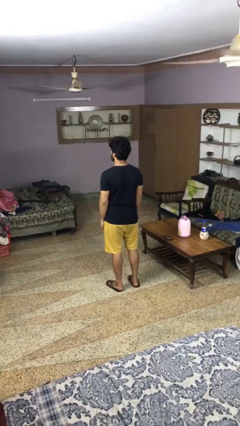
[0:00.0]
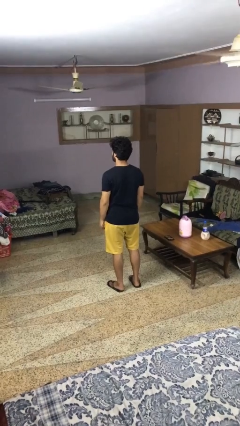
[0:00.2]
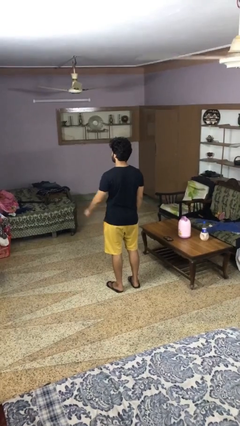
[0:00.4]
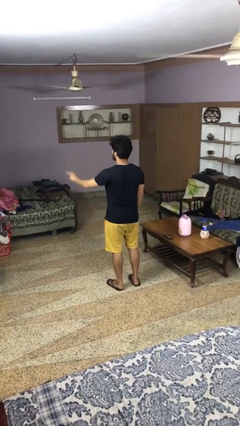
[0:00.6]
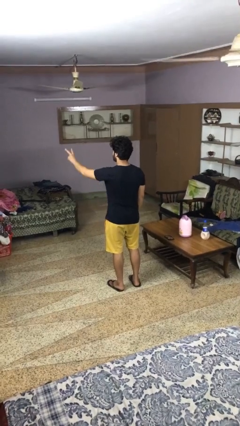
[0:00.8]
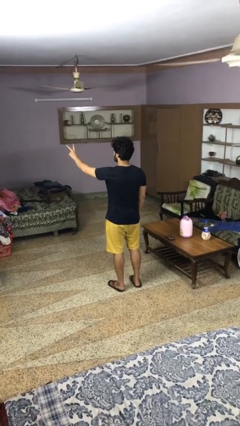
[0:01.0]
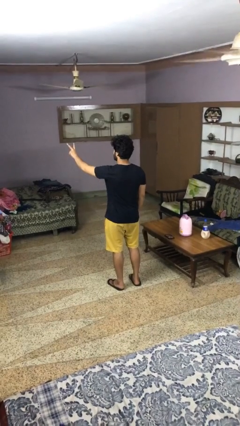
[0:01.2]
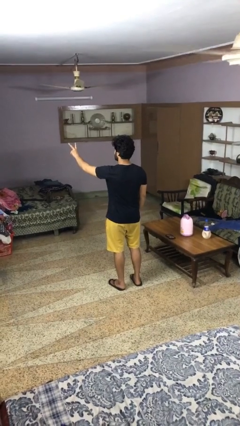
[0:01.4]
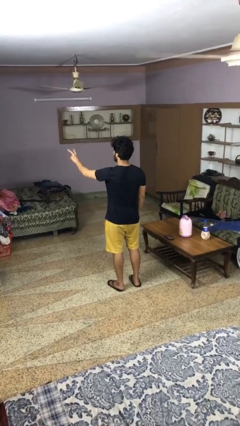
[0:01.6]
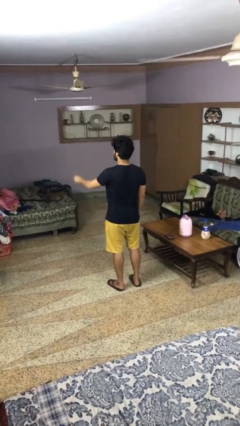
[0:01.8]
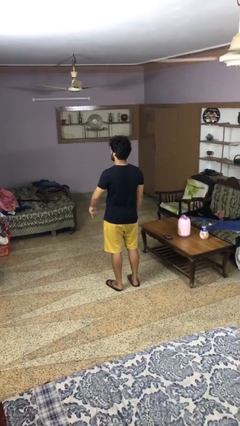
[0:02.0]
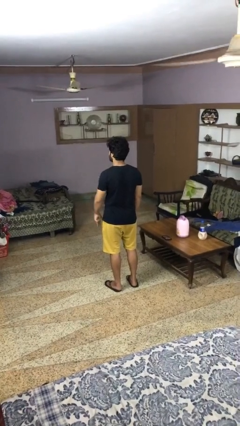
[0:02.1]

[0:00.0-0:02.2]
person gestures peace

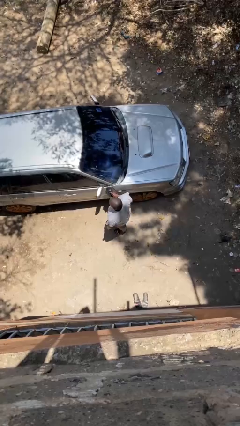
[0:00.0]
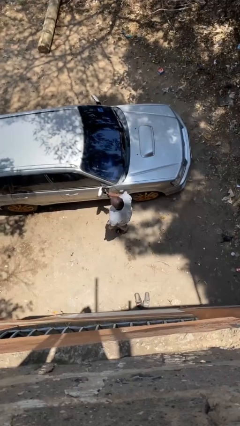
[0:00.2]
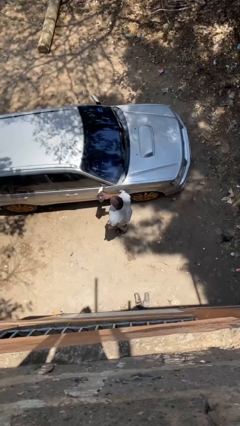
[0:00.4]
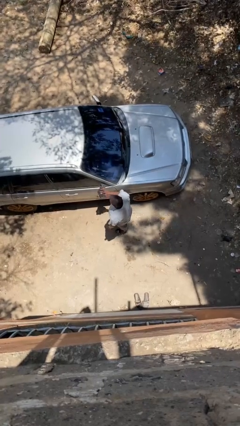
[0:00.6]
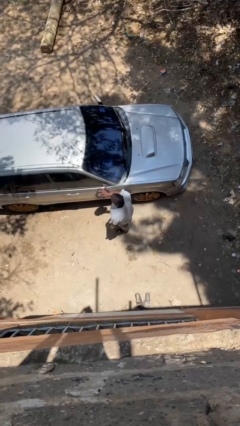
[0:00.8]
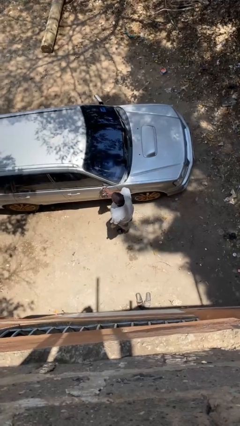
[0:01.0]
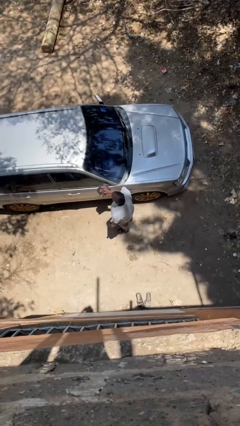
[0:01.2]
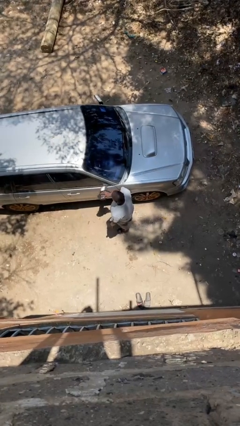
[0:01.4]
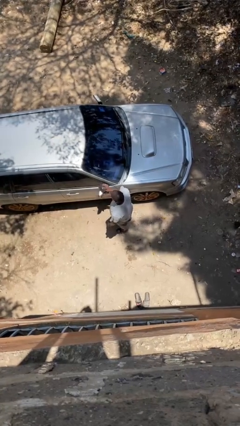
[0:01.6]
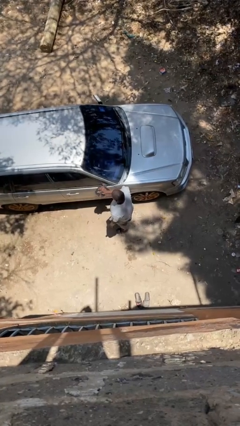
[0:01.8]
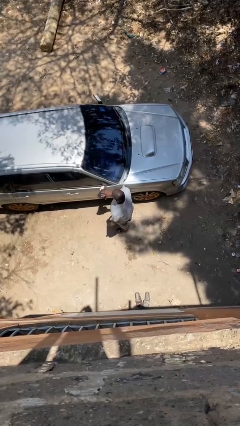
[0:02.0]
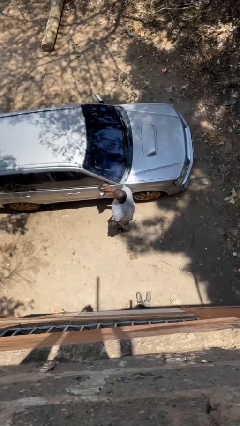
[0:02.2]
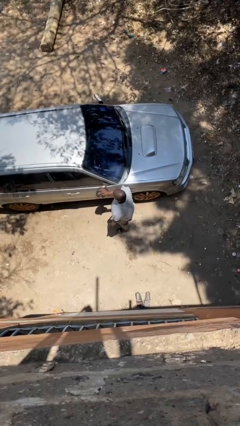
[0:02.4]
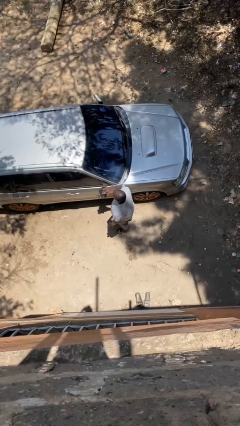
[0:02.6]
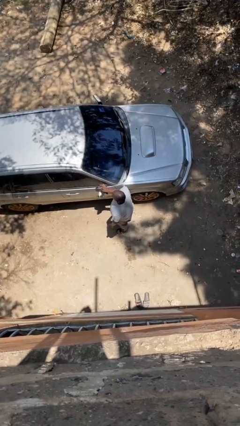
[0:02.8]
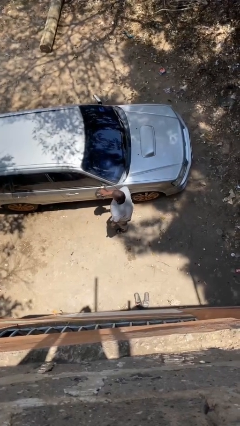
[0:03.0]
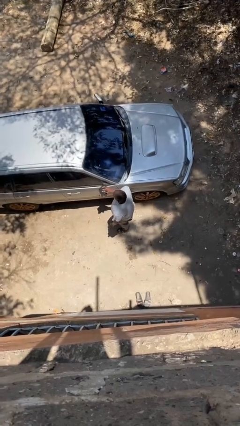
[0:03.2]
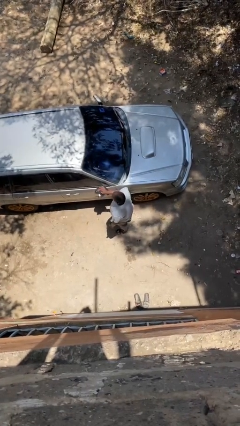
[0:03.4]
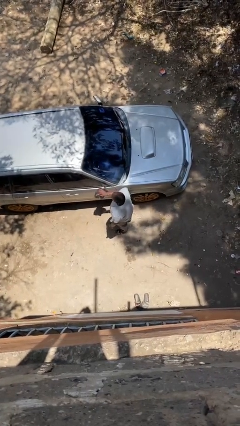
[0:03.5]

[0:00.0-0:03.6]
person polishes car with rag

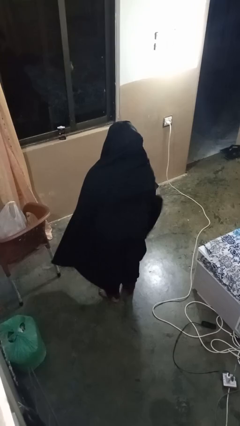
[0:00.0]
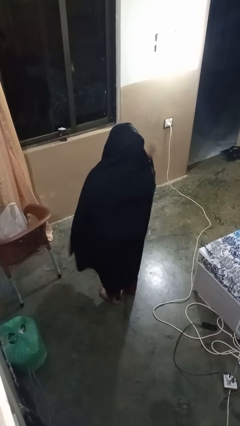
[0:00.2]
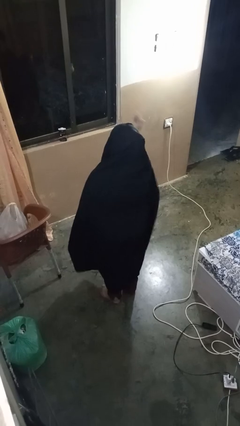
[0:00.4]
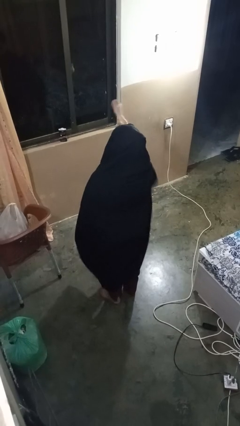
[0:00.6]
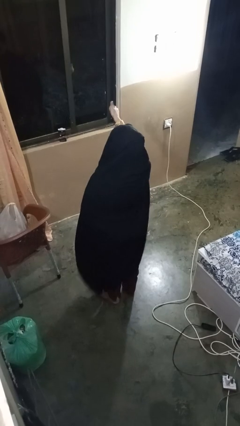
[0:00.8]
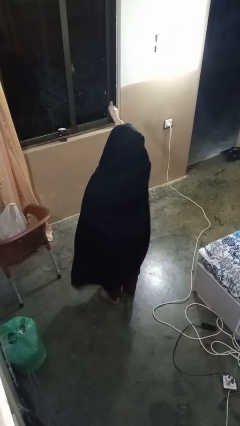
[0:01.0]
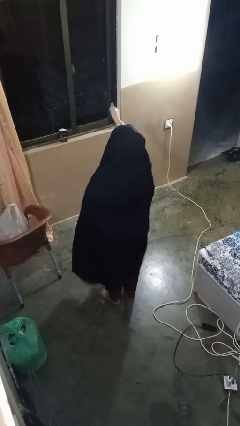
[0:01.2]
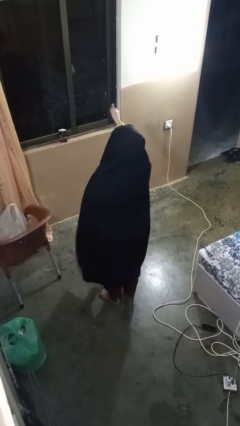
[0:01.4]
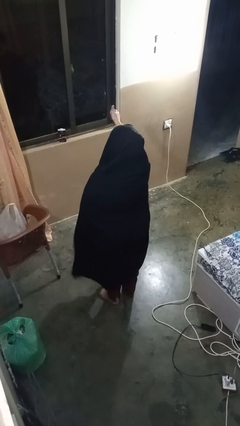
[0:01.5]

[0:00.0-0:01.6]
person gestures thumbs up

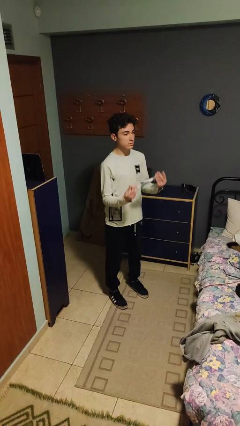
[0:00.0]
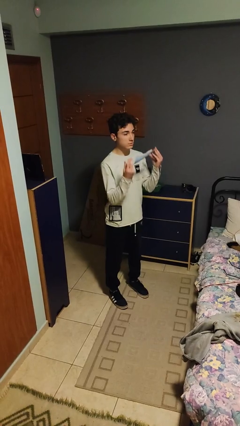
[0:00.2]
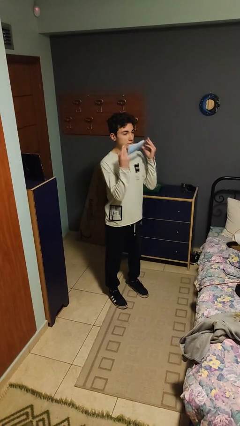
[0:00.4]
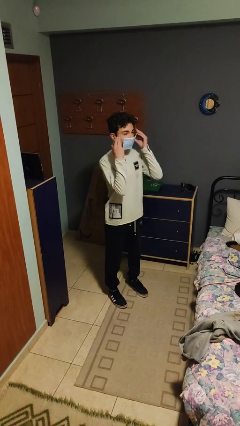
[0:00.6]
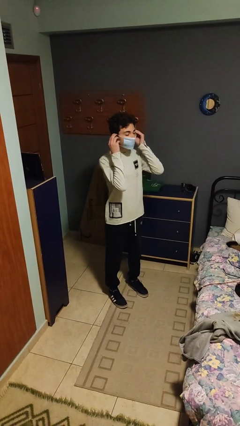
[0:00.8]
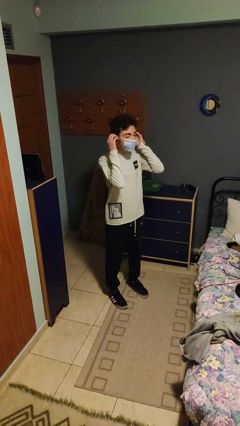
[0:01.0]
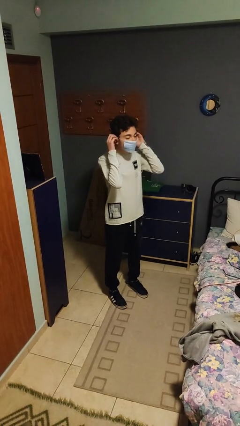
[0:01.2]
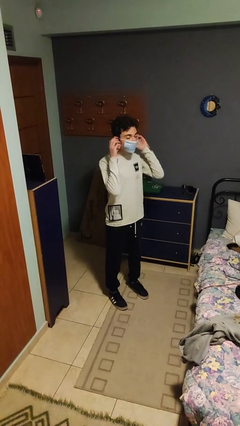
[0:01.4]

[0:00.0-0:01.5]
person puts on facemask

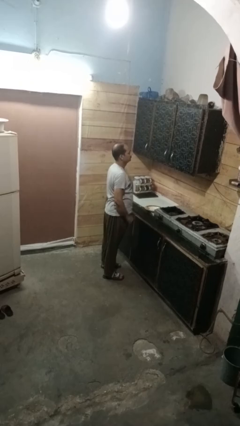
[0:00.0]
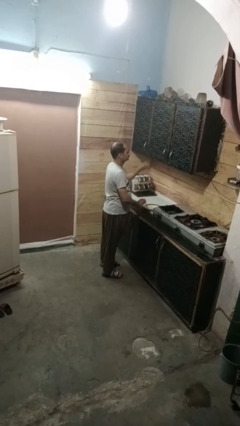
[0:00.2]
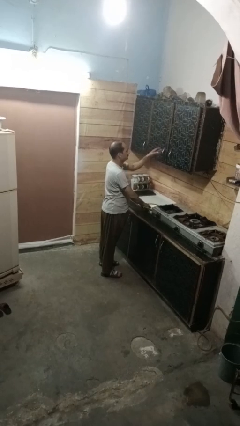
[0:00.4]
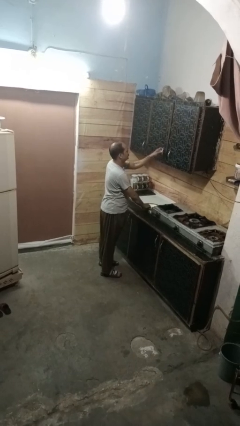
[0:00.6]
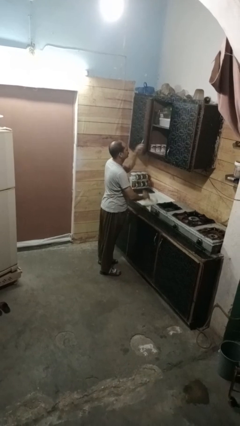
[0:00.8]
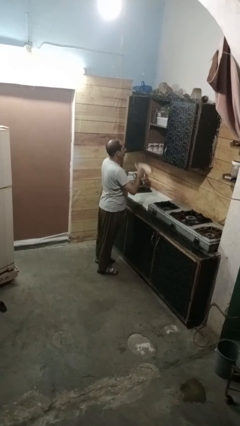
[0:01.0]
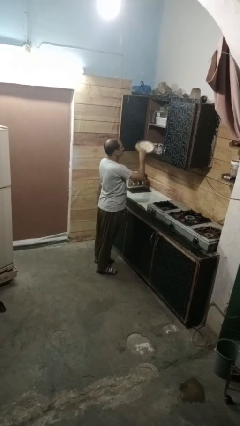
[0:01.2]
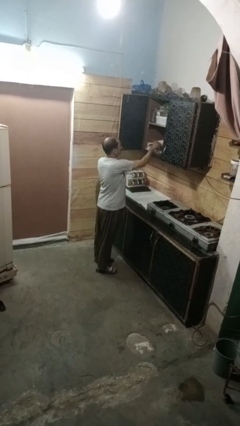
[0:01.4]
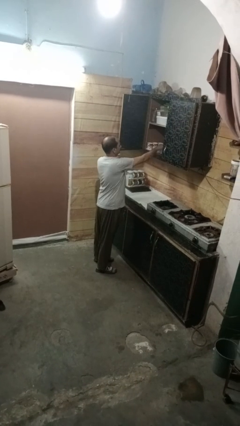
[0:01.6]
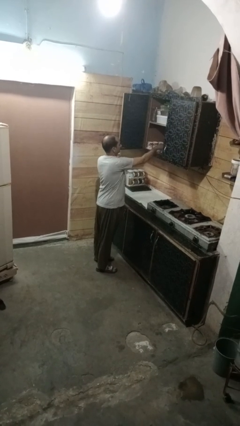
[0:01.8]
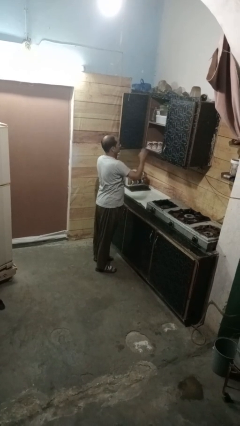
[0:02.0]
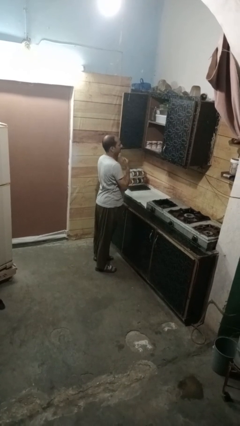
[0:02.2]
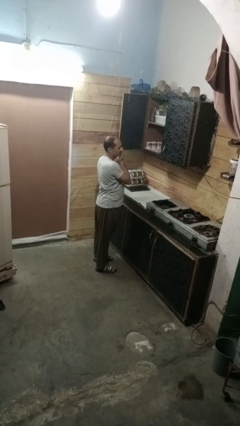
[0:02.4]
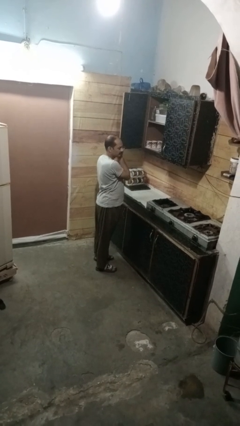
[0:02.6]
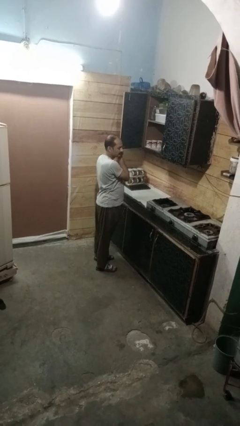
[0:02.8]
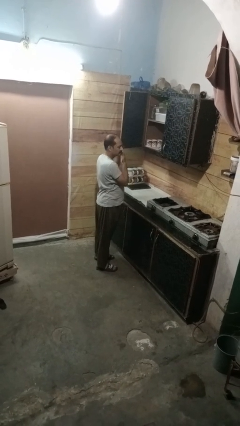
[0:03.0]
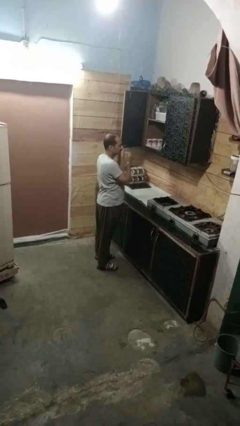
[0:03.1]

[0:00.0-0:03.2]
person puts object in cabinet

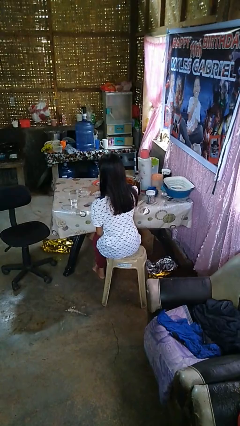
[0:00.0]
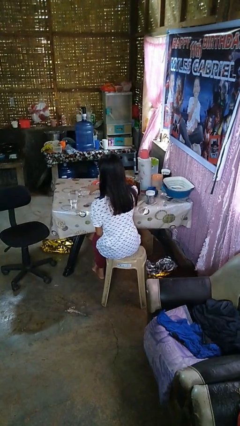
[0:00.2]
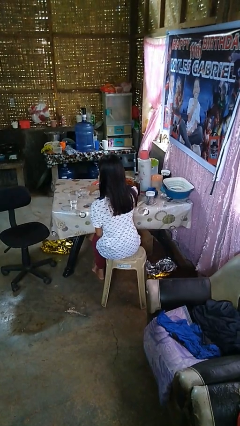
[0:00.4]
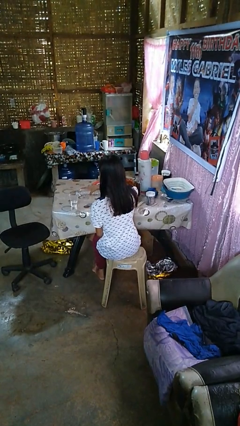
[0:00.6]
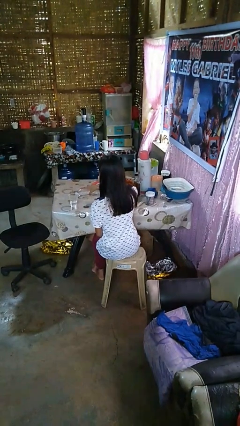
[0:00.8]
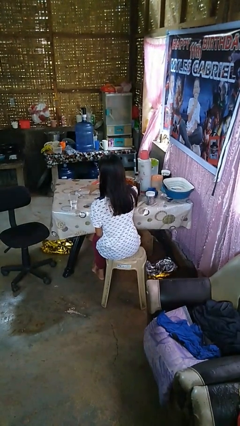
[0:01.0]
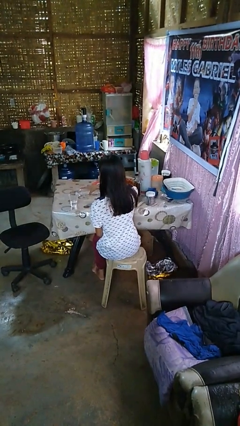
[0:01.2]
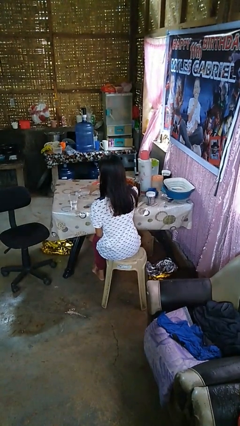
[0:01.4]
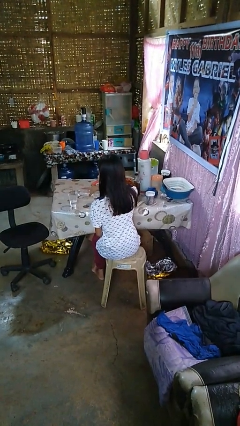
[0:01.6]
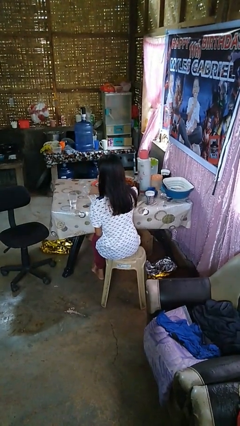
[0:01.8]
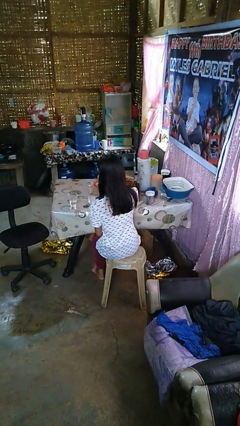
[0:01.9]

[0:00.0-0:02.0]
person pours liquid into cup

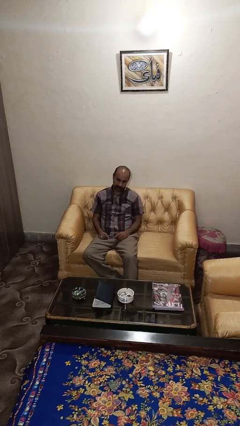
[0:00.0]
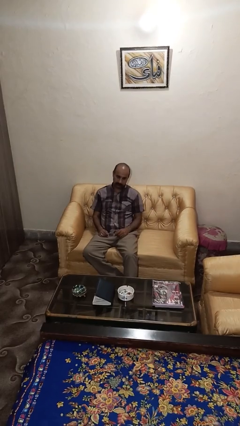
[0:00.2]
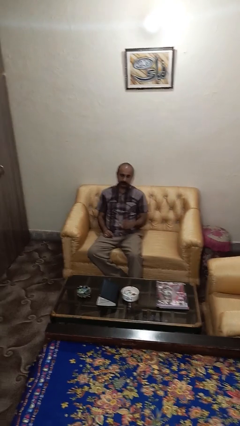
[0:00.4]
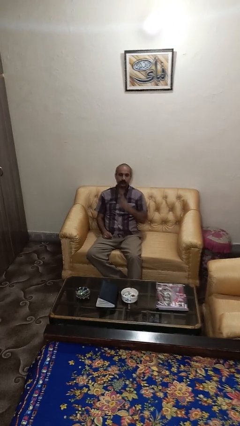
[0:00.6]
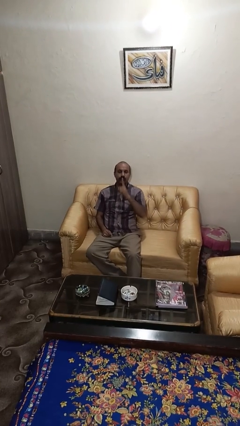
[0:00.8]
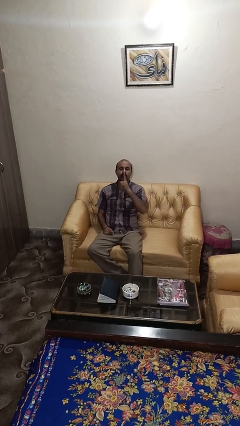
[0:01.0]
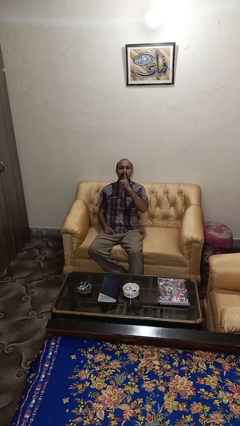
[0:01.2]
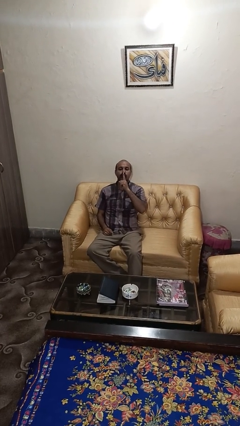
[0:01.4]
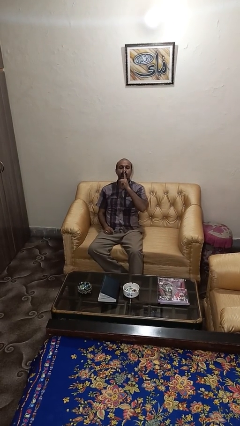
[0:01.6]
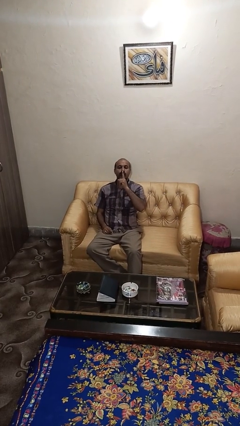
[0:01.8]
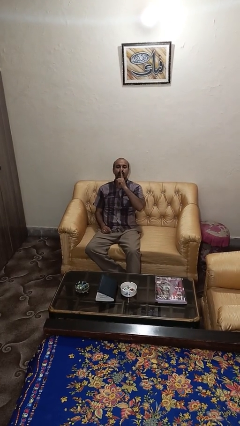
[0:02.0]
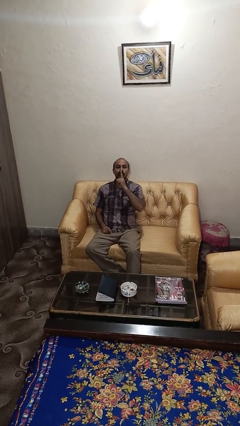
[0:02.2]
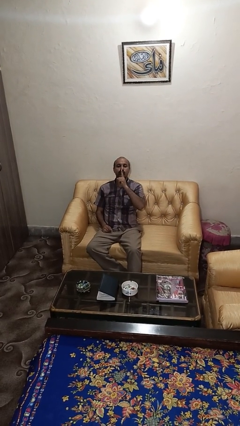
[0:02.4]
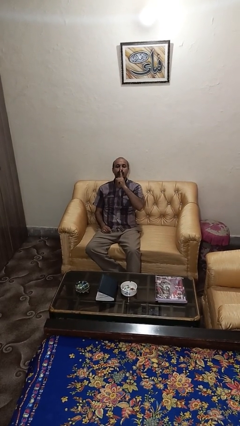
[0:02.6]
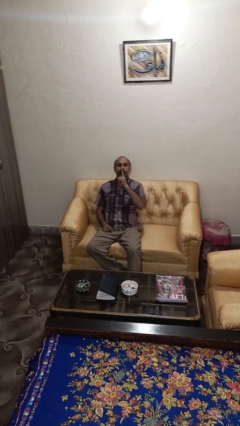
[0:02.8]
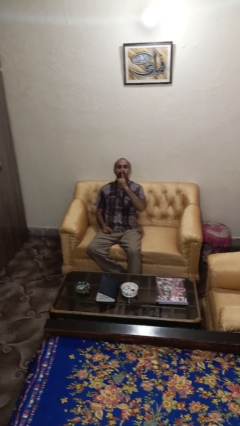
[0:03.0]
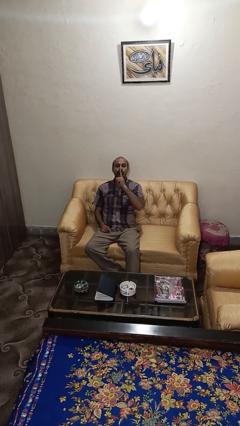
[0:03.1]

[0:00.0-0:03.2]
person gestures be quiet
